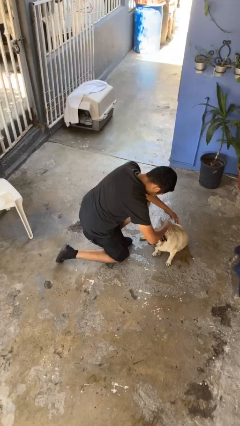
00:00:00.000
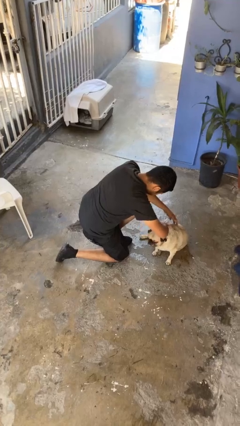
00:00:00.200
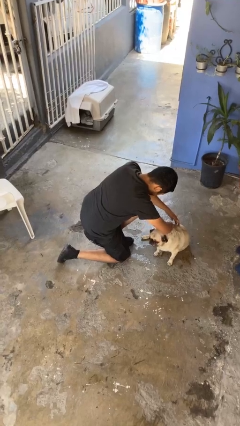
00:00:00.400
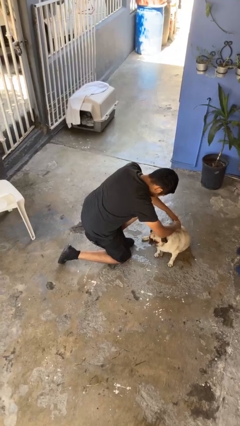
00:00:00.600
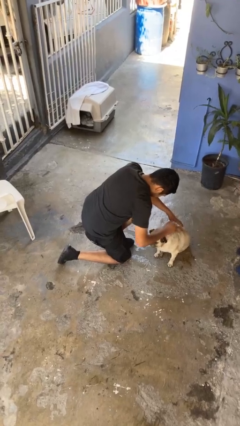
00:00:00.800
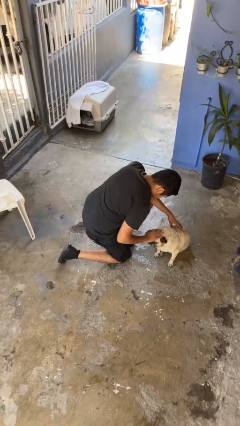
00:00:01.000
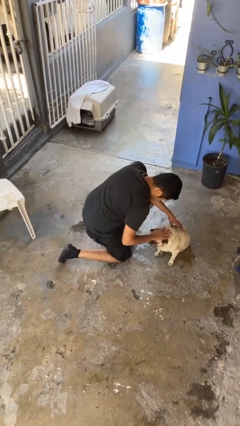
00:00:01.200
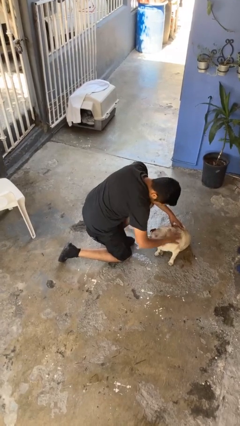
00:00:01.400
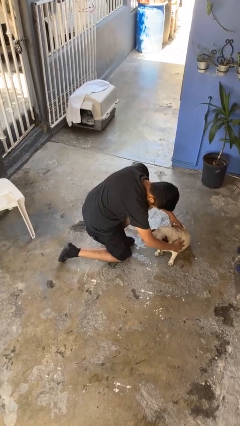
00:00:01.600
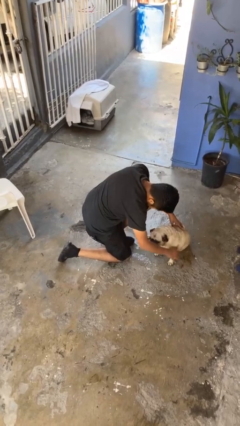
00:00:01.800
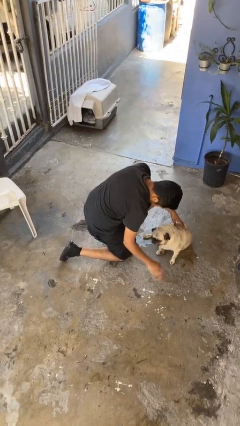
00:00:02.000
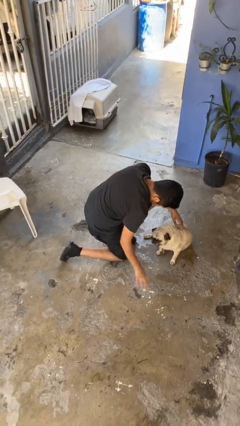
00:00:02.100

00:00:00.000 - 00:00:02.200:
person pets dog

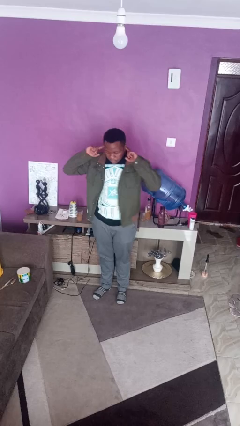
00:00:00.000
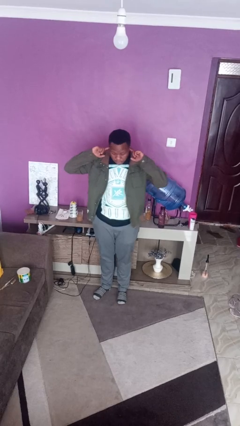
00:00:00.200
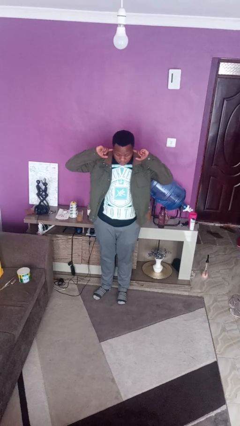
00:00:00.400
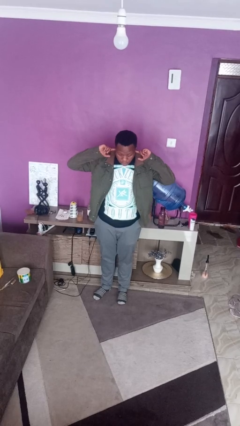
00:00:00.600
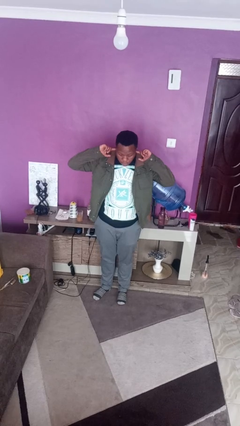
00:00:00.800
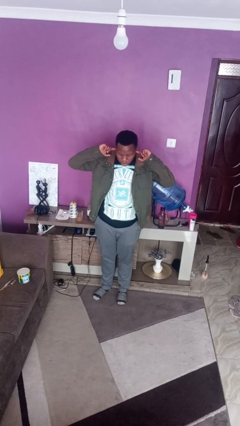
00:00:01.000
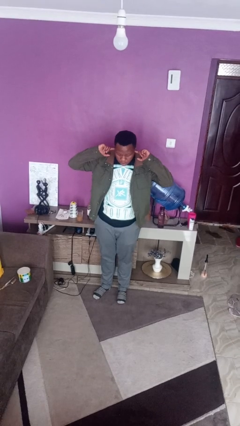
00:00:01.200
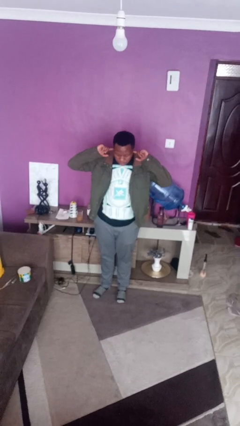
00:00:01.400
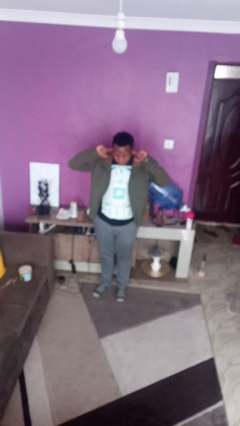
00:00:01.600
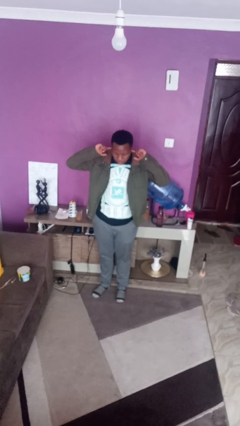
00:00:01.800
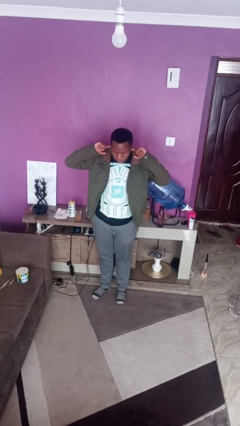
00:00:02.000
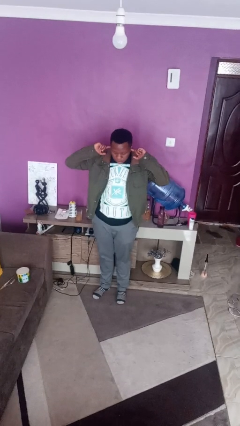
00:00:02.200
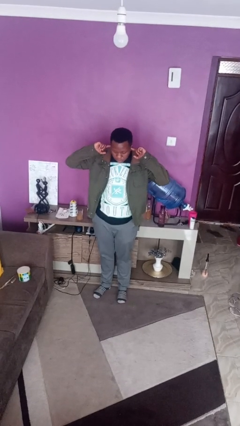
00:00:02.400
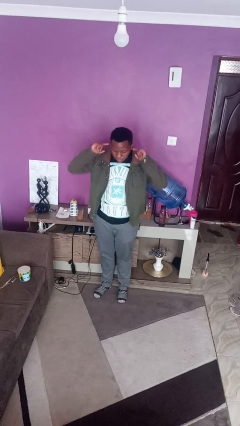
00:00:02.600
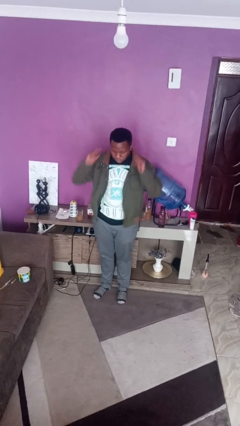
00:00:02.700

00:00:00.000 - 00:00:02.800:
person puts fingers in ear

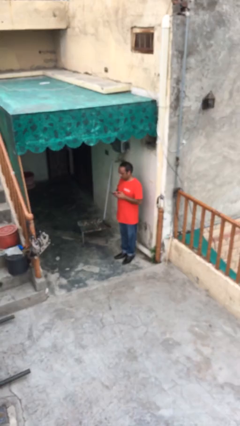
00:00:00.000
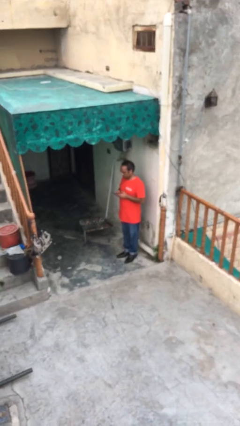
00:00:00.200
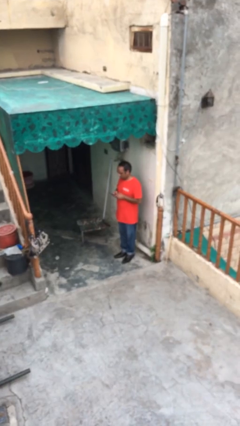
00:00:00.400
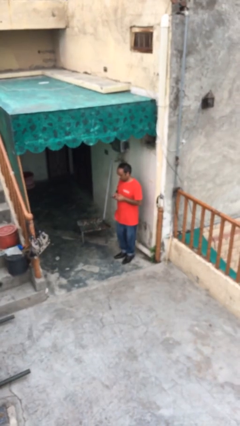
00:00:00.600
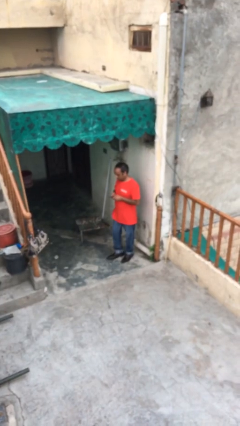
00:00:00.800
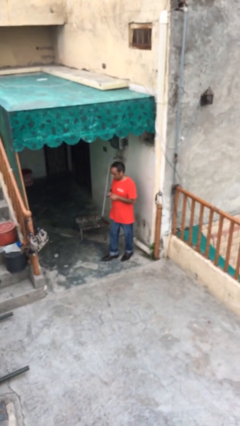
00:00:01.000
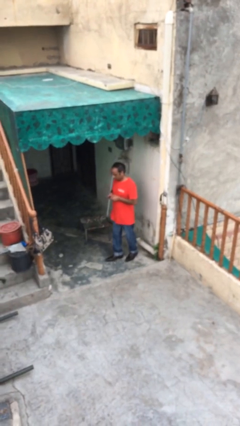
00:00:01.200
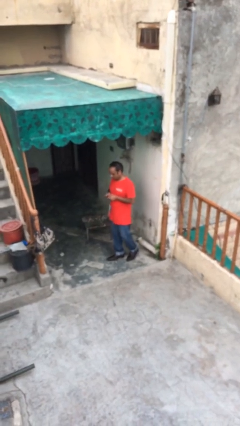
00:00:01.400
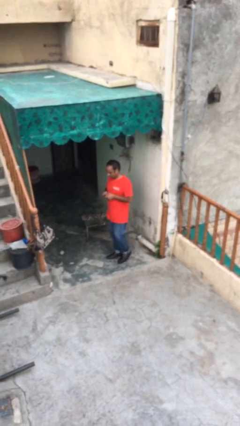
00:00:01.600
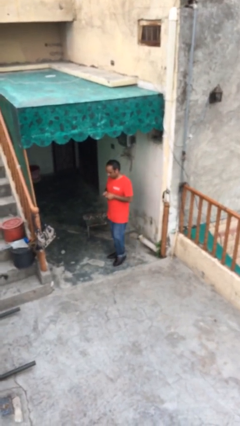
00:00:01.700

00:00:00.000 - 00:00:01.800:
person texts on phone

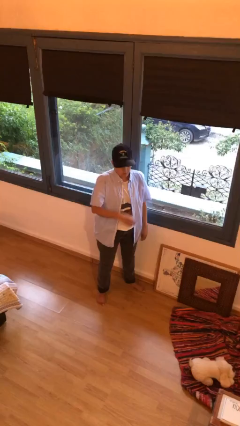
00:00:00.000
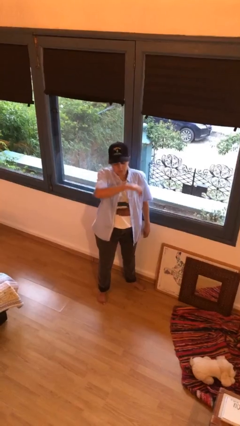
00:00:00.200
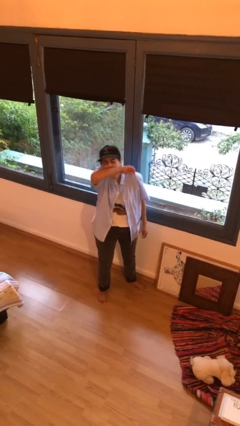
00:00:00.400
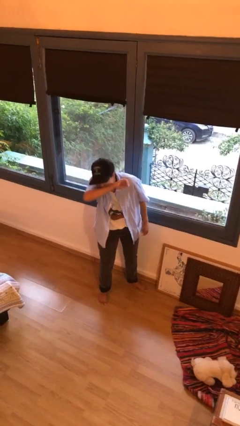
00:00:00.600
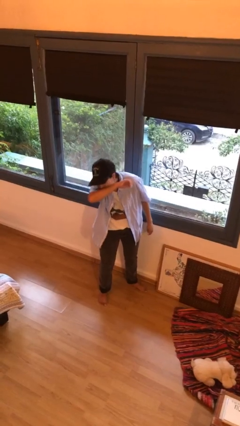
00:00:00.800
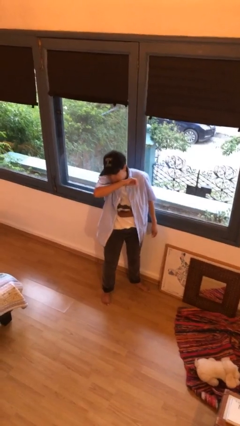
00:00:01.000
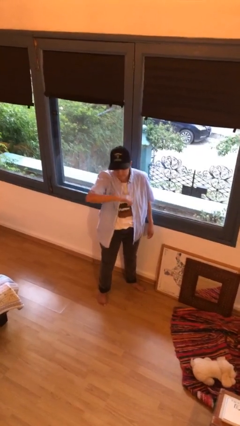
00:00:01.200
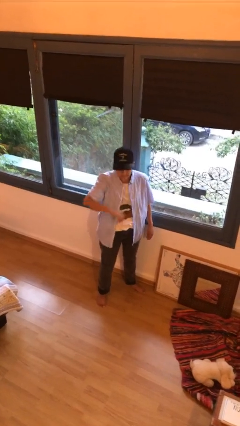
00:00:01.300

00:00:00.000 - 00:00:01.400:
person sneezes into arm

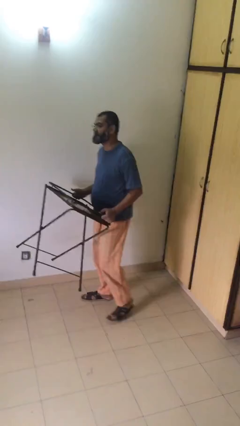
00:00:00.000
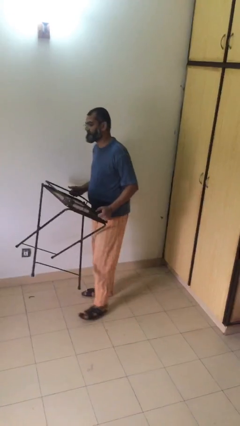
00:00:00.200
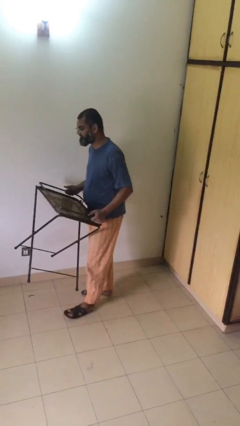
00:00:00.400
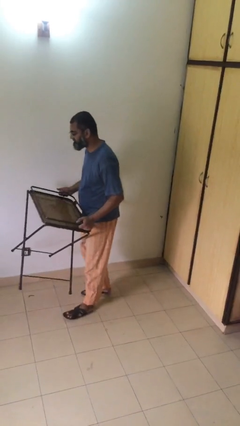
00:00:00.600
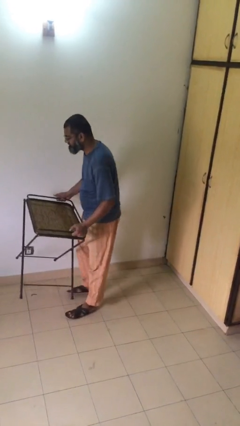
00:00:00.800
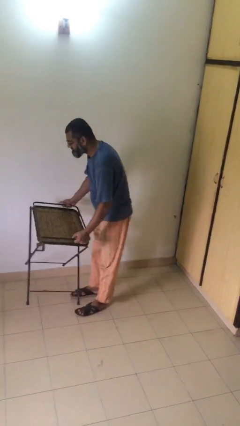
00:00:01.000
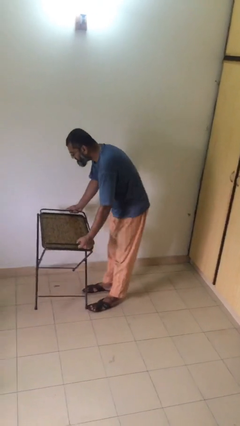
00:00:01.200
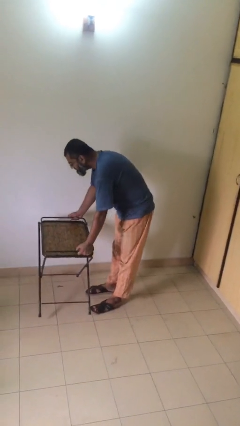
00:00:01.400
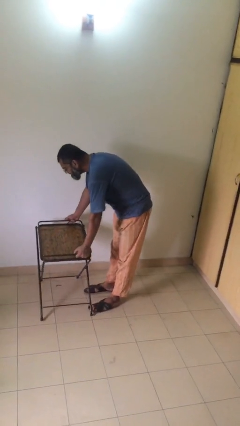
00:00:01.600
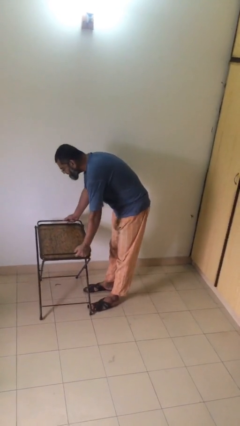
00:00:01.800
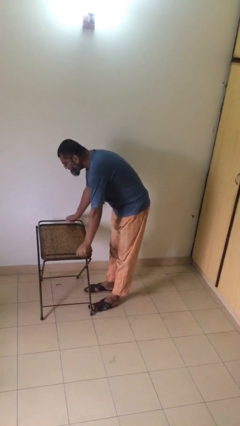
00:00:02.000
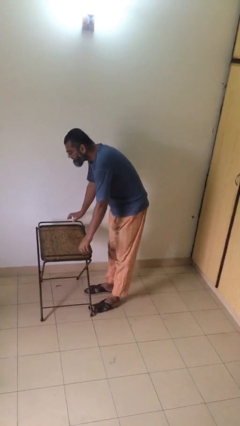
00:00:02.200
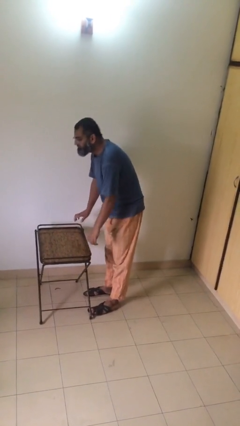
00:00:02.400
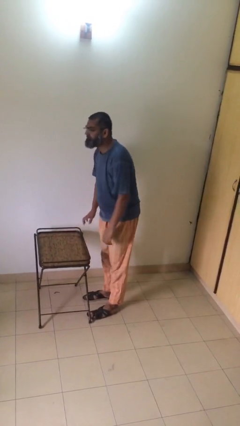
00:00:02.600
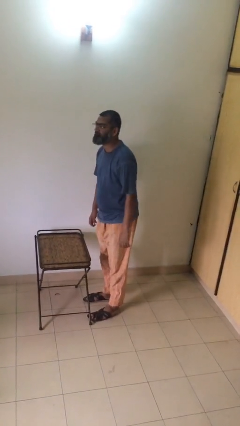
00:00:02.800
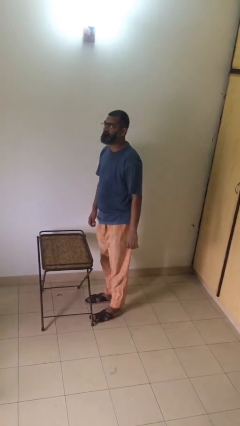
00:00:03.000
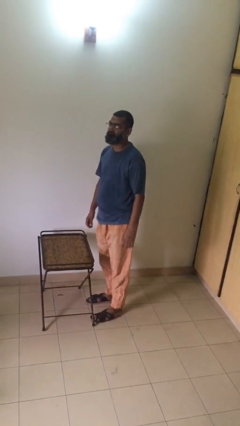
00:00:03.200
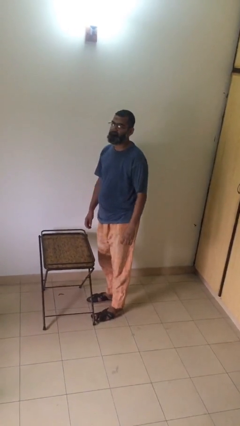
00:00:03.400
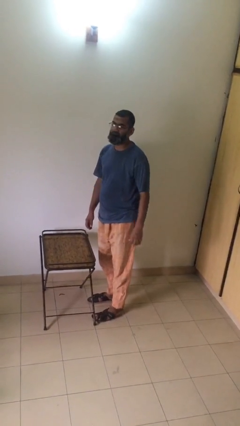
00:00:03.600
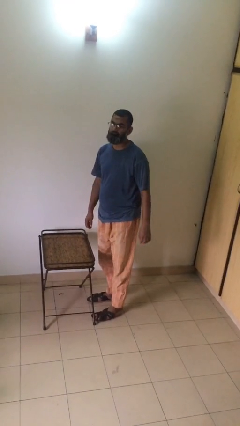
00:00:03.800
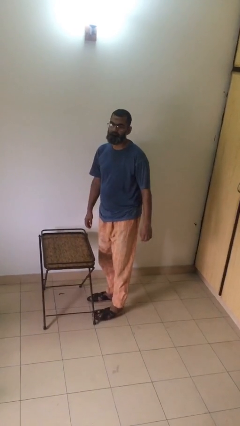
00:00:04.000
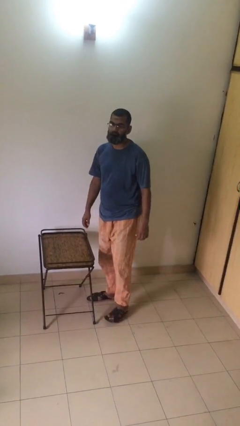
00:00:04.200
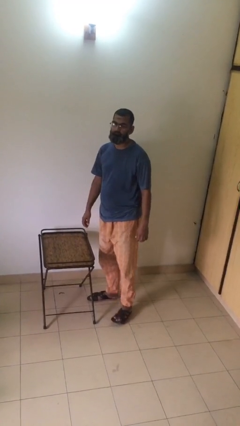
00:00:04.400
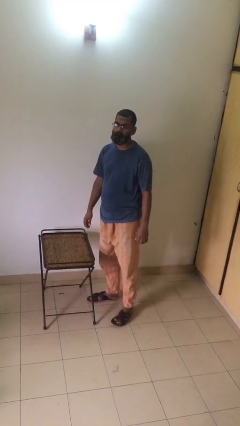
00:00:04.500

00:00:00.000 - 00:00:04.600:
person puts down object on floor

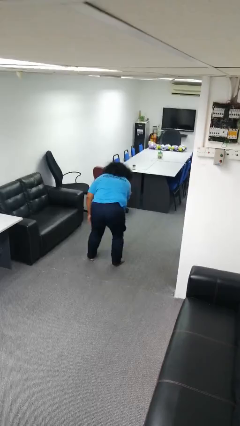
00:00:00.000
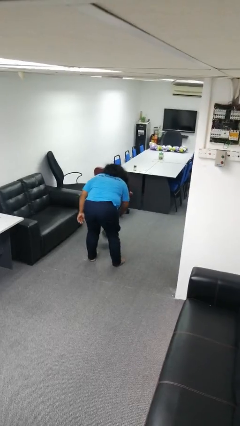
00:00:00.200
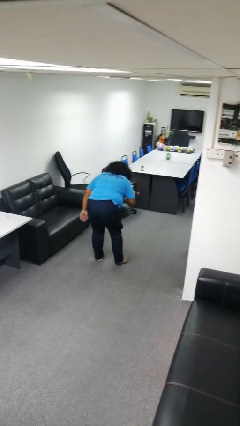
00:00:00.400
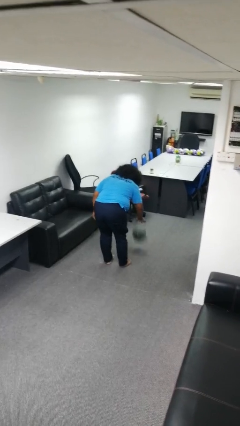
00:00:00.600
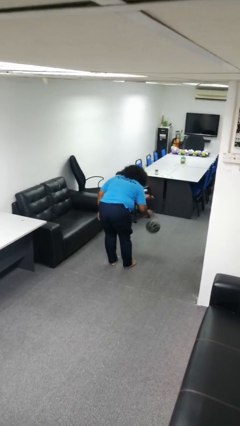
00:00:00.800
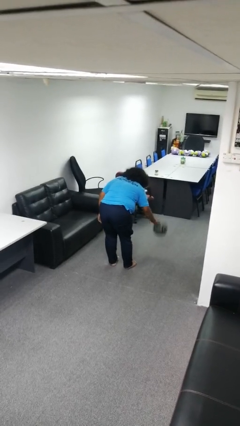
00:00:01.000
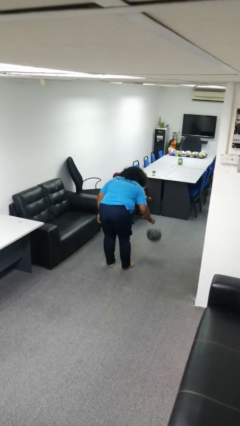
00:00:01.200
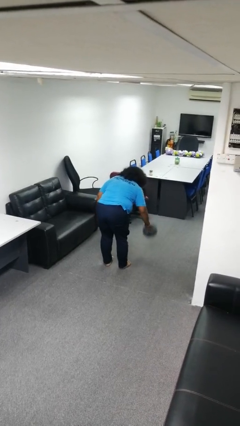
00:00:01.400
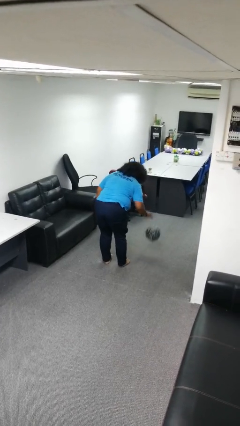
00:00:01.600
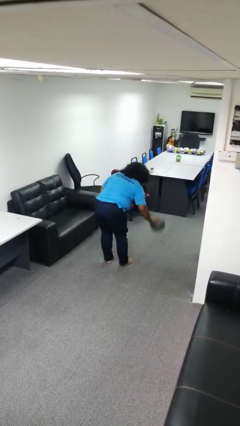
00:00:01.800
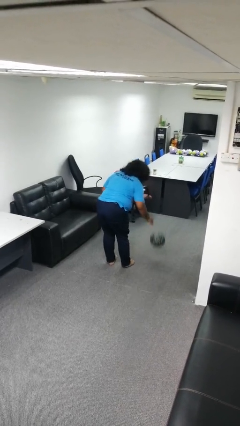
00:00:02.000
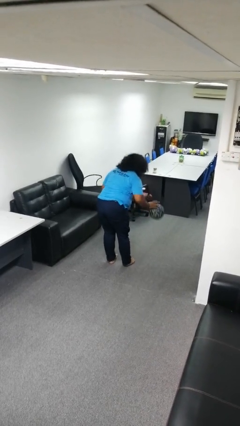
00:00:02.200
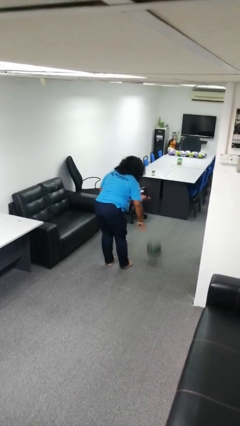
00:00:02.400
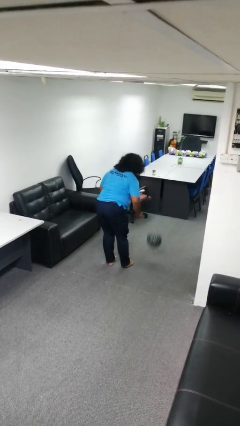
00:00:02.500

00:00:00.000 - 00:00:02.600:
person bounces ball on floor

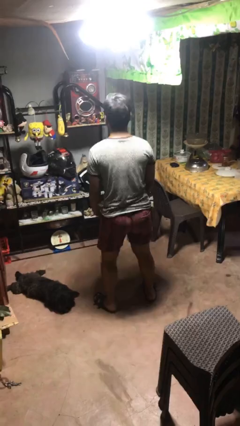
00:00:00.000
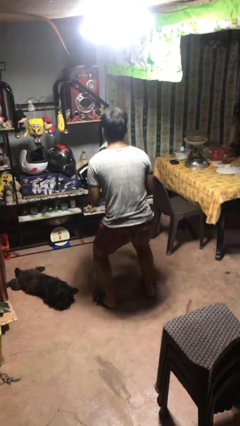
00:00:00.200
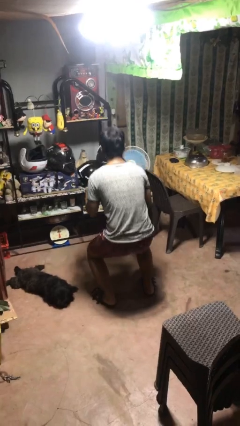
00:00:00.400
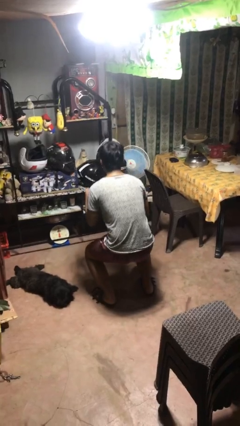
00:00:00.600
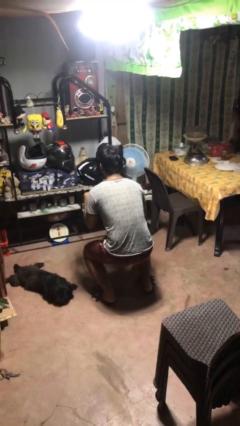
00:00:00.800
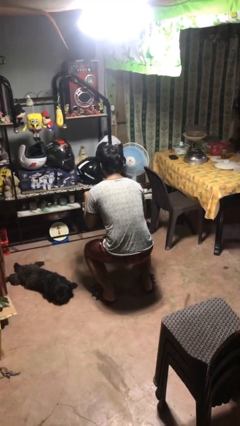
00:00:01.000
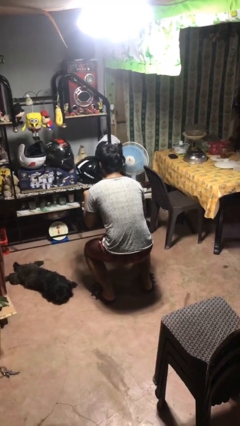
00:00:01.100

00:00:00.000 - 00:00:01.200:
person squats

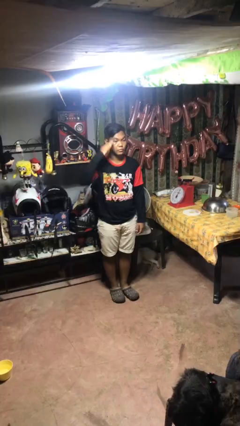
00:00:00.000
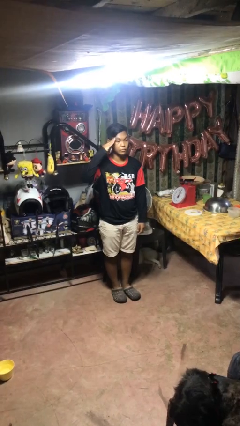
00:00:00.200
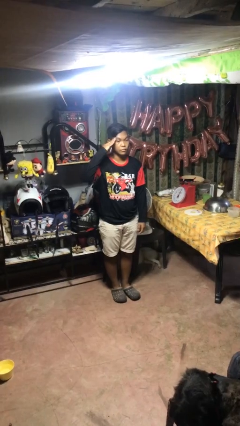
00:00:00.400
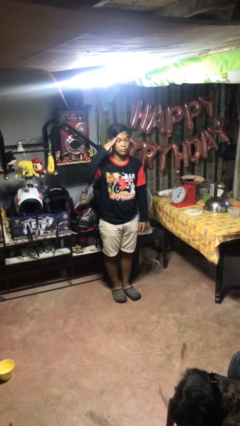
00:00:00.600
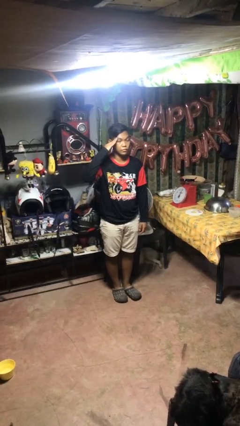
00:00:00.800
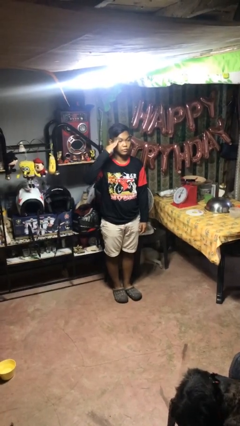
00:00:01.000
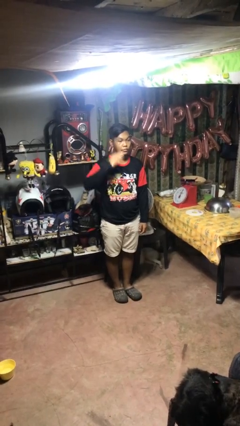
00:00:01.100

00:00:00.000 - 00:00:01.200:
person salutes
